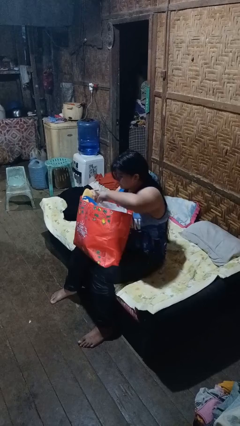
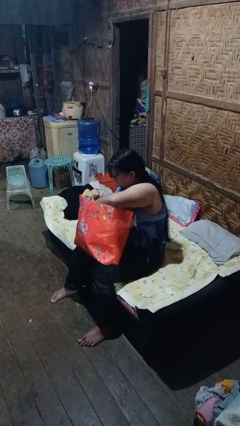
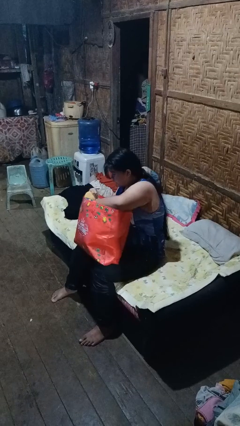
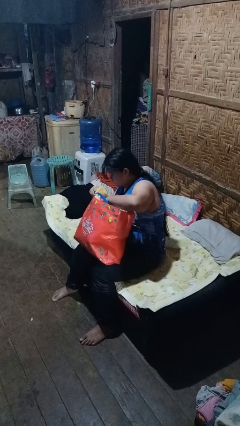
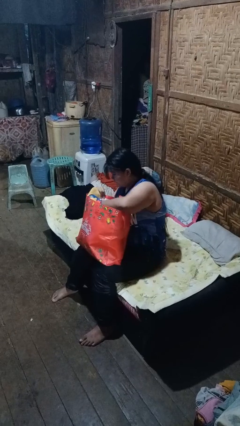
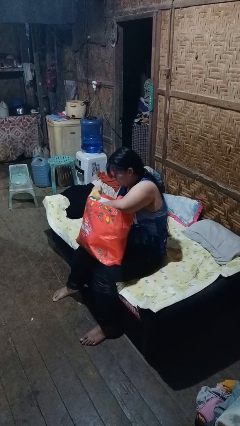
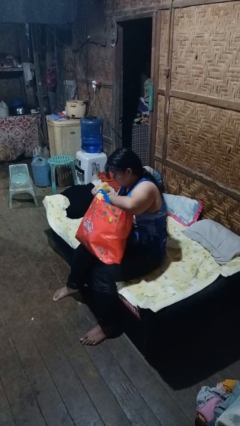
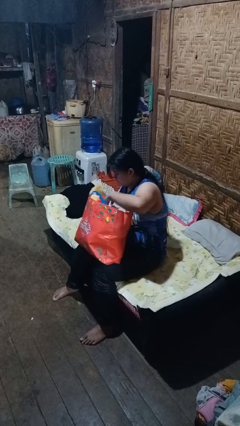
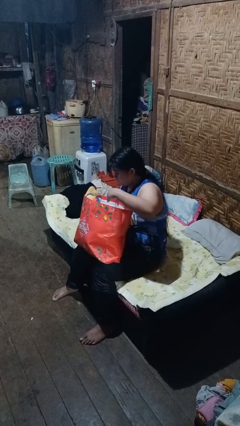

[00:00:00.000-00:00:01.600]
person searches in bag

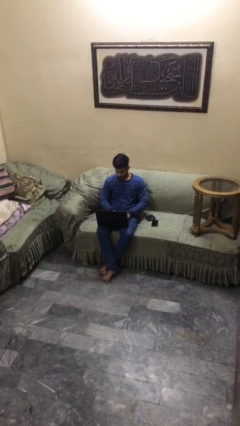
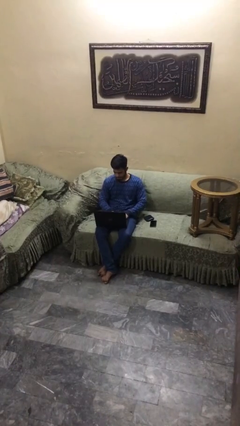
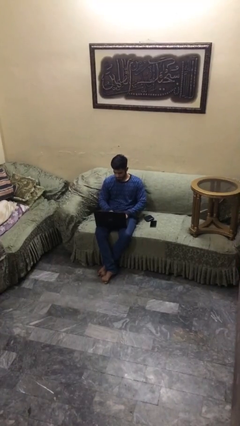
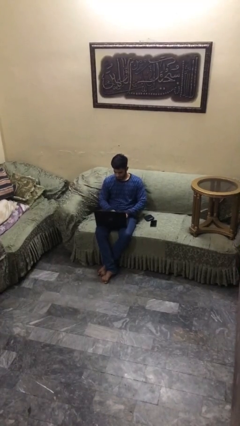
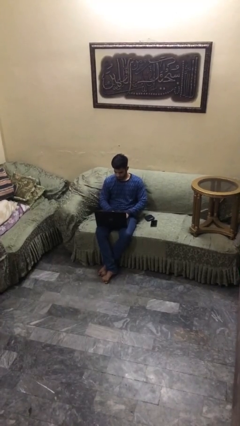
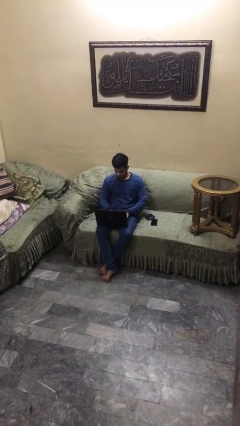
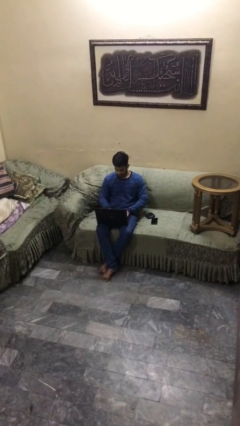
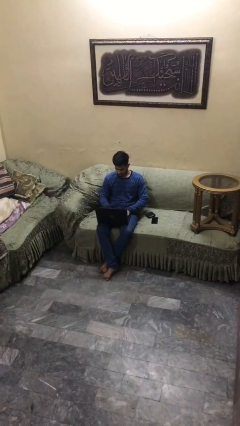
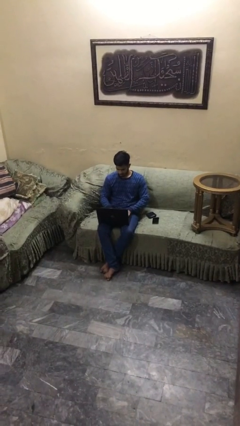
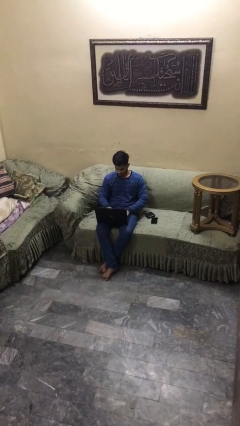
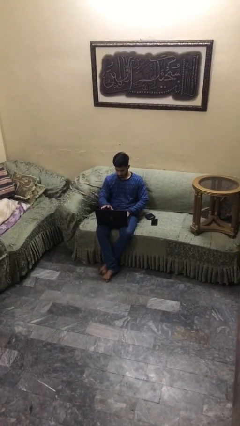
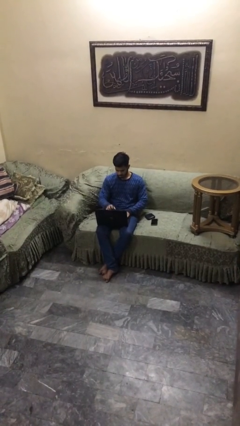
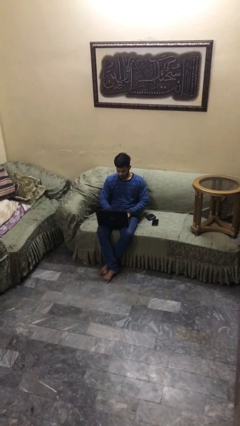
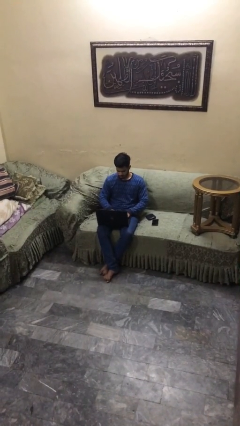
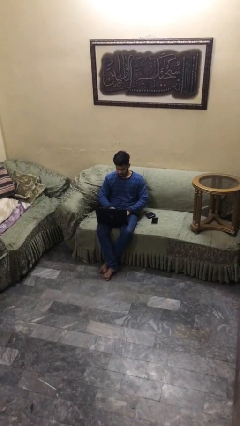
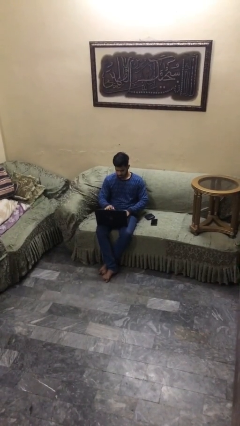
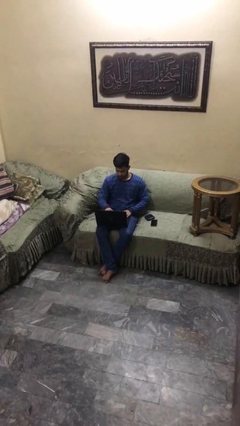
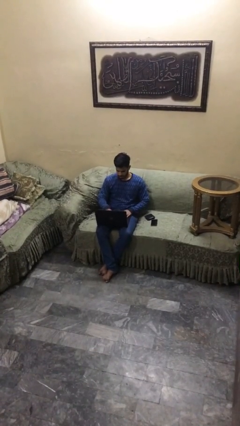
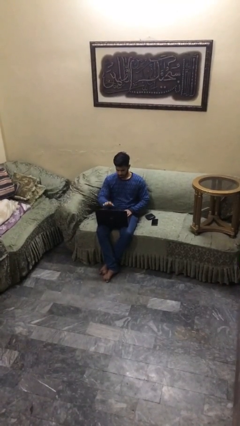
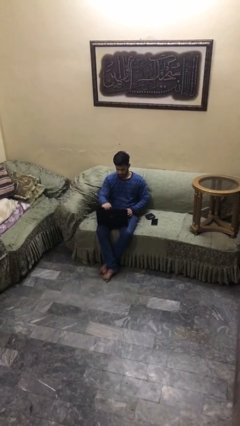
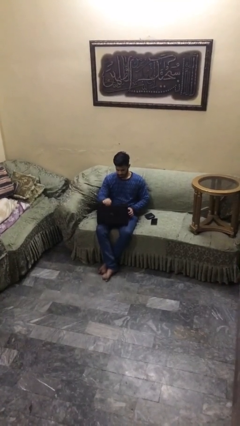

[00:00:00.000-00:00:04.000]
person interacts with laptop

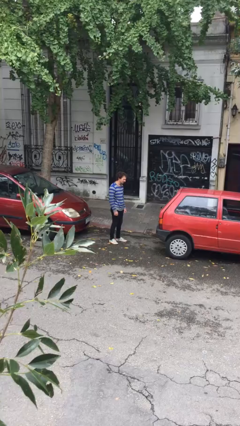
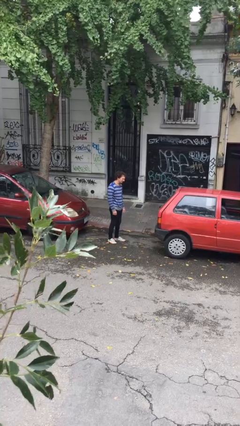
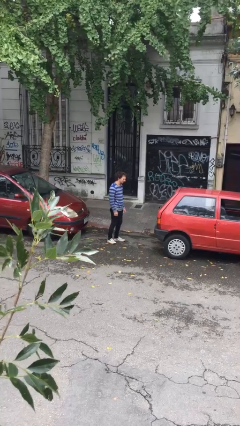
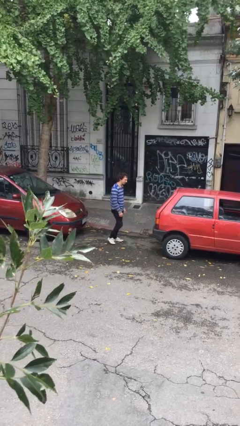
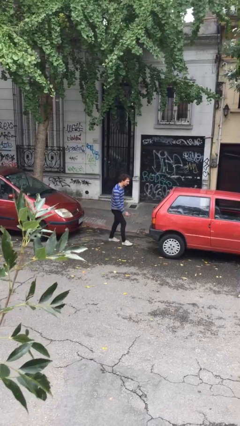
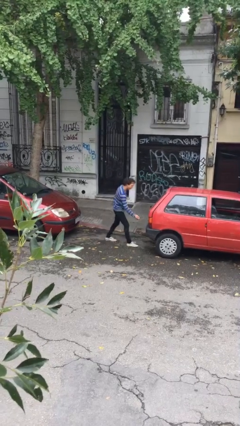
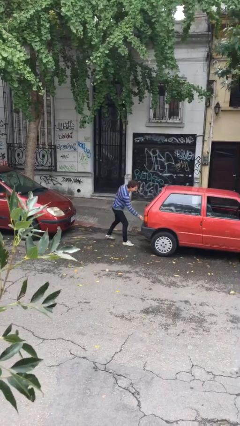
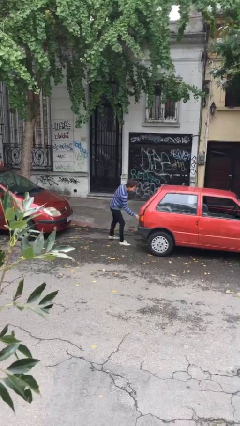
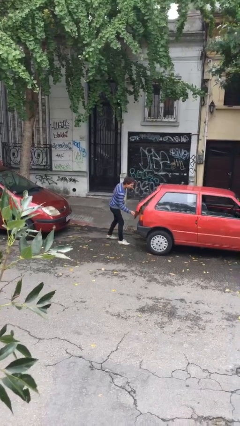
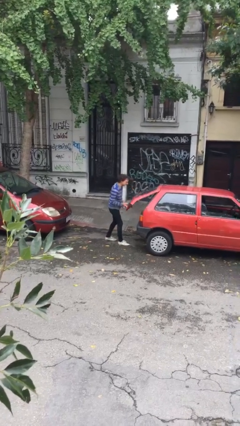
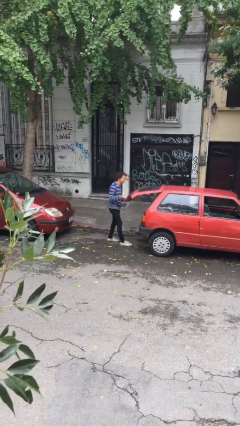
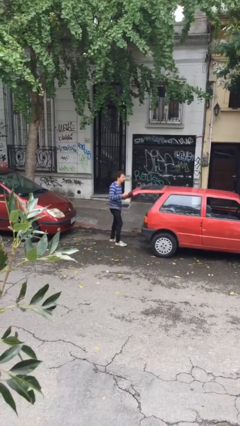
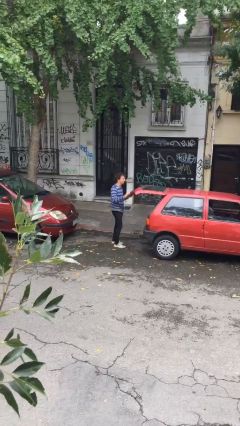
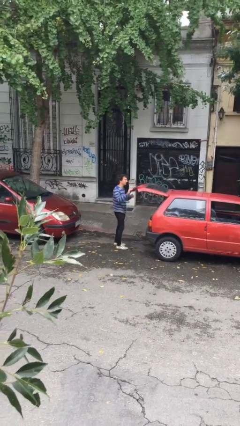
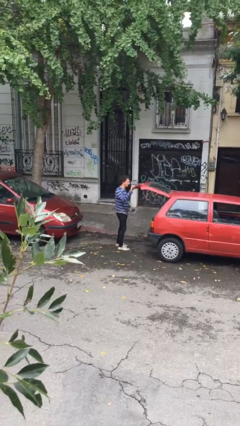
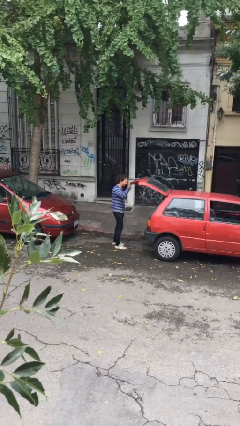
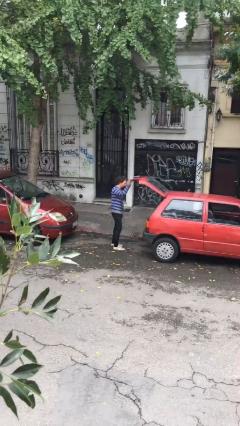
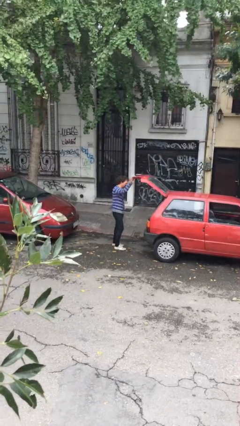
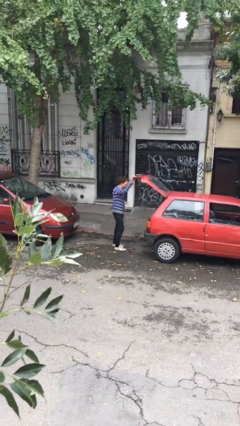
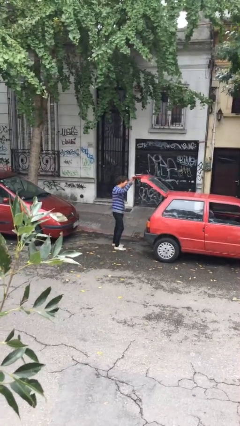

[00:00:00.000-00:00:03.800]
person opens car trunk

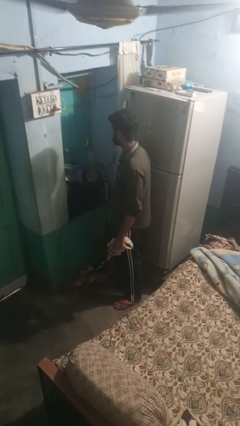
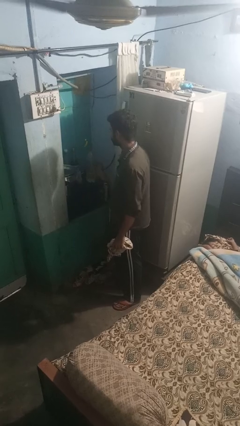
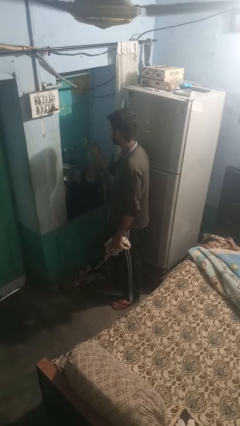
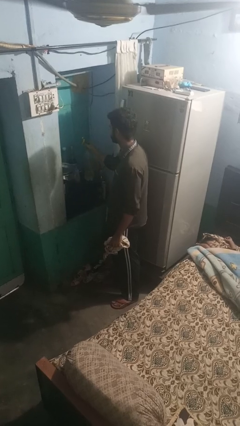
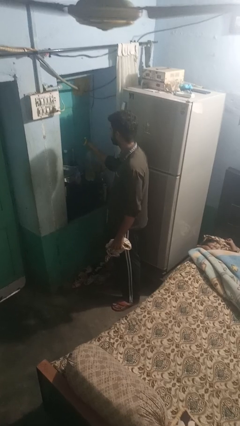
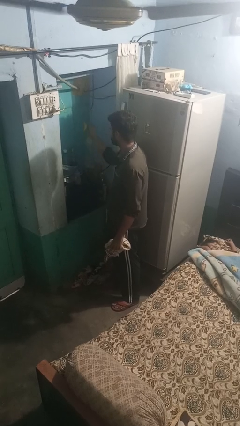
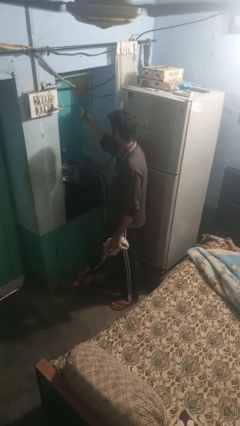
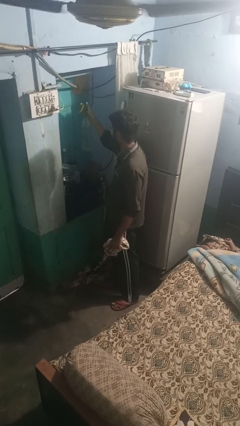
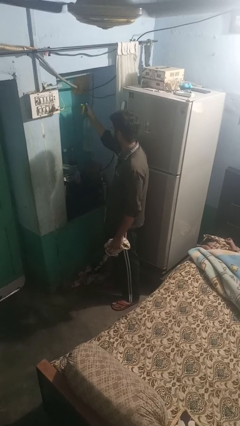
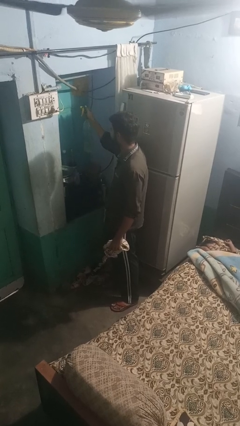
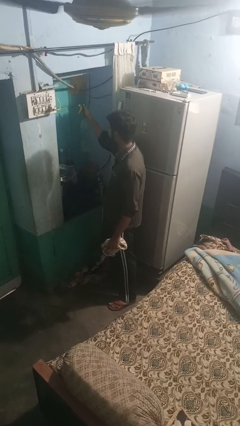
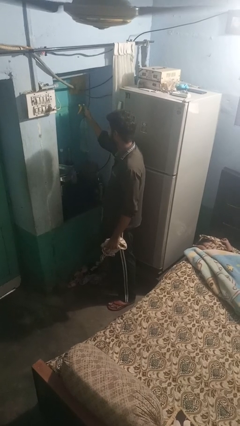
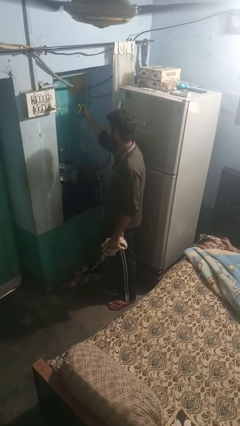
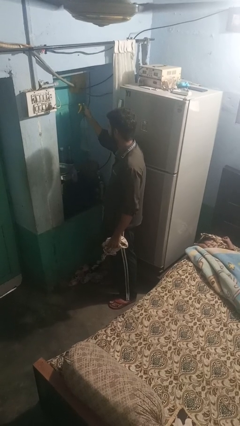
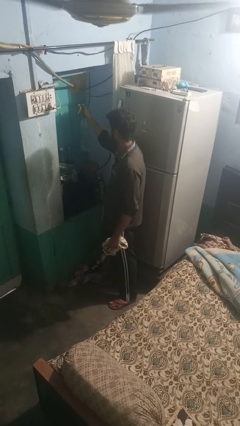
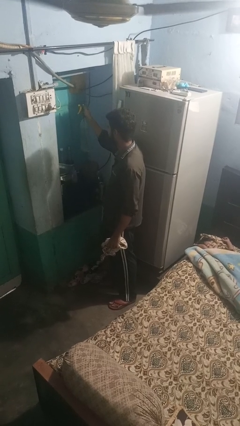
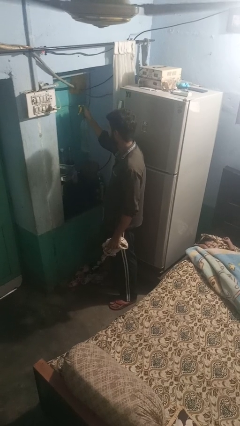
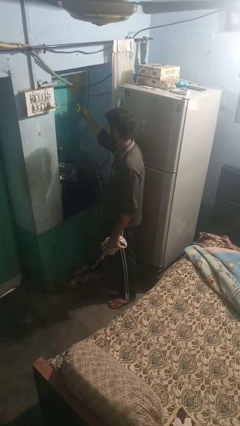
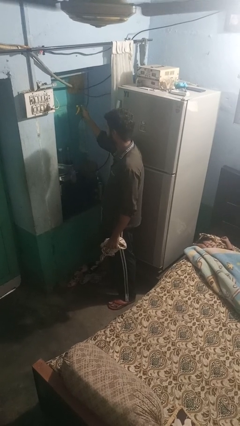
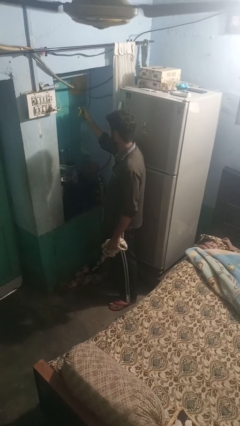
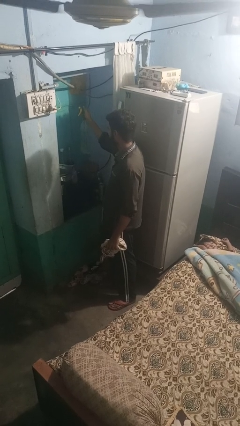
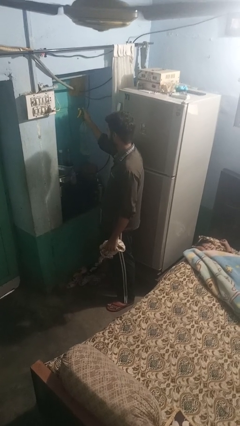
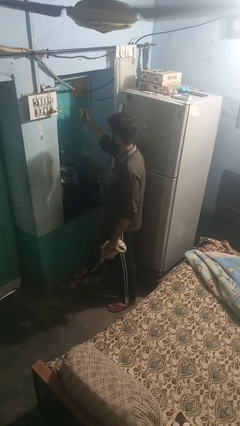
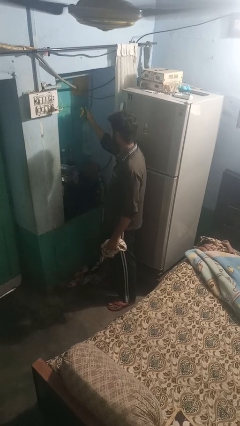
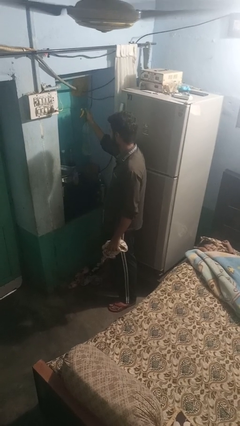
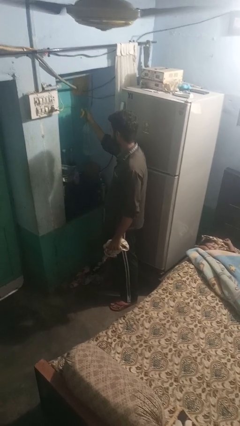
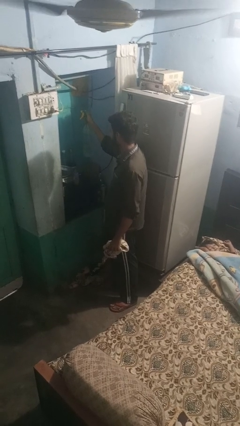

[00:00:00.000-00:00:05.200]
person sprays from bottle

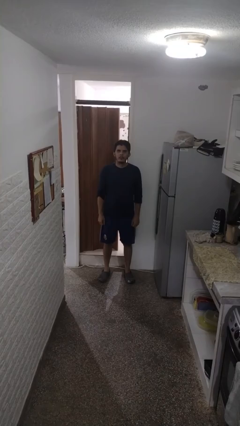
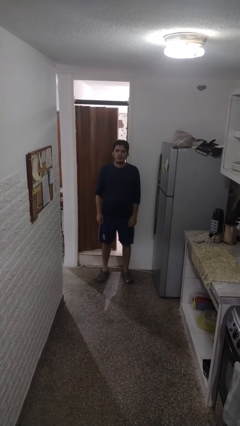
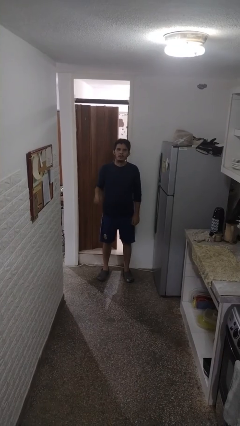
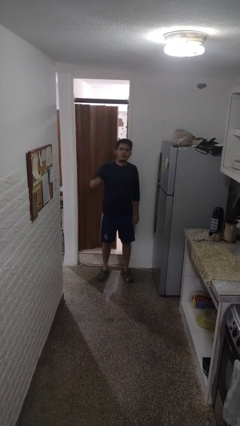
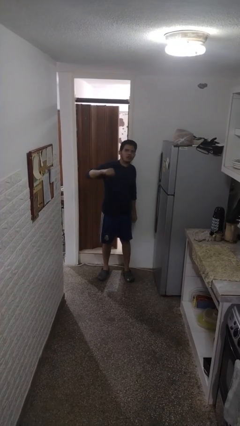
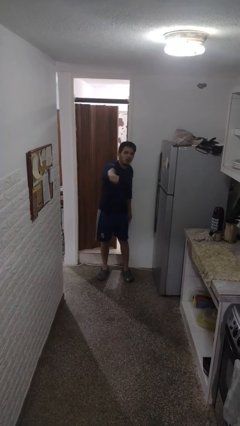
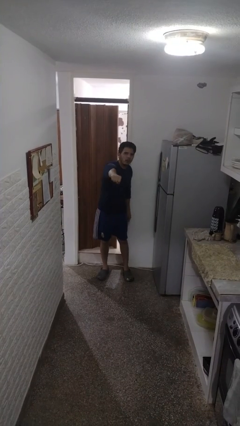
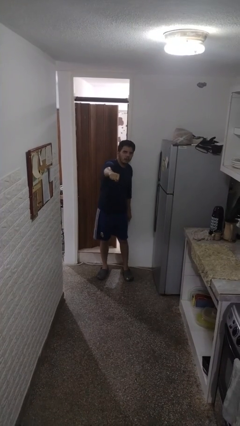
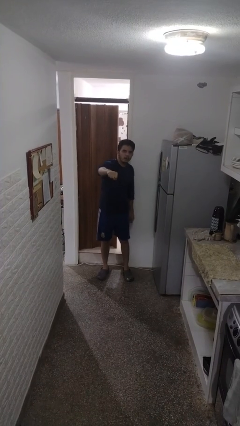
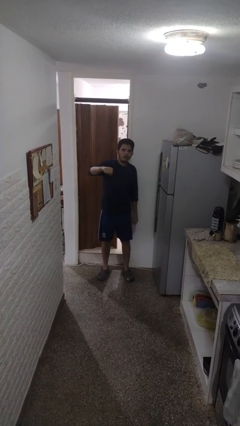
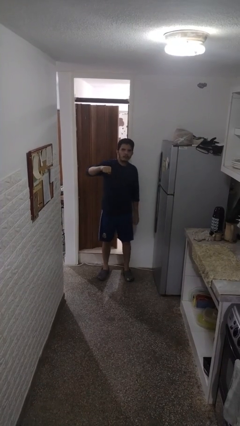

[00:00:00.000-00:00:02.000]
person punches

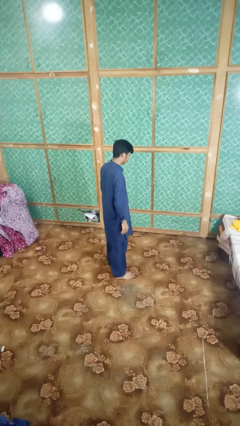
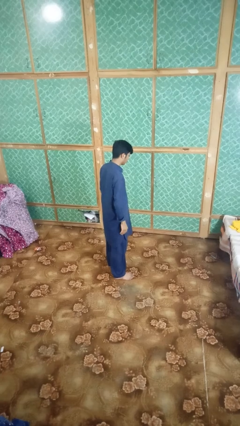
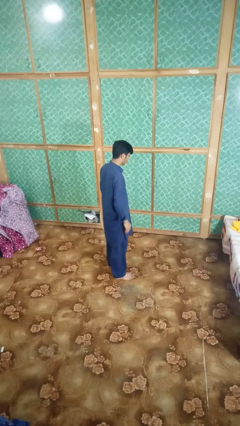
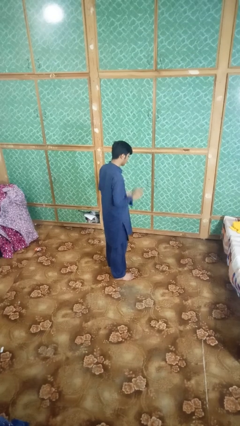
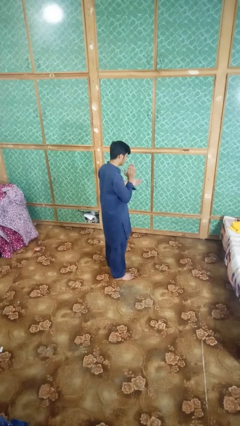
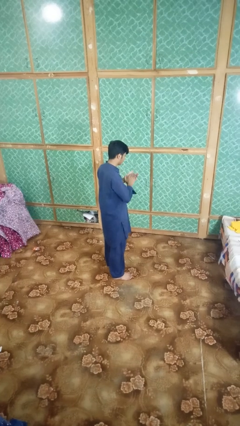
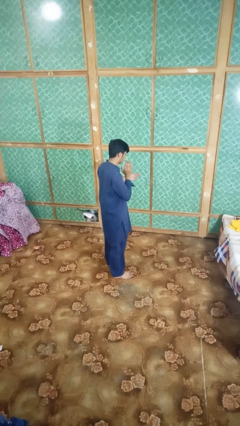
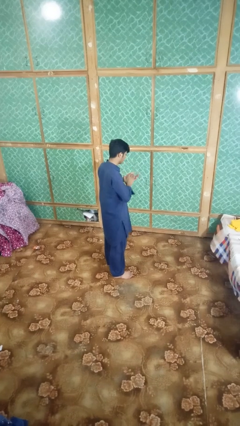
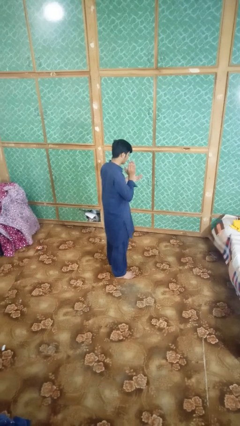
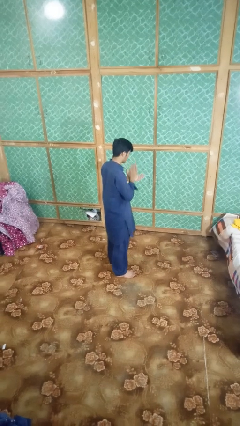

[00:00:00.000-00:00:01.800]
person claps hands
